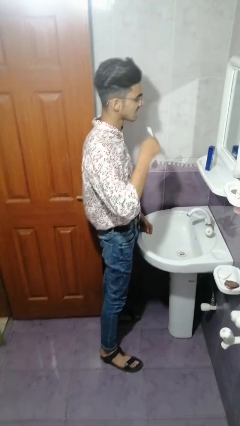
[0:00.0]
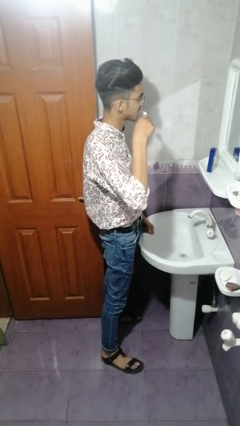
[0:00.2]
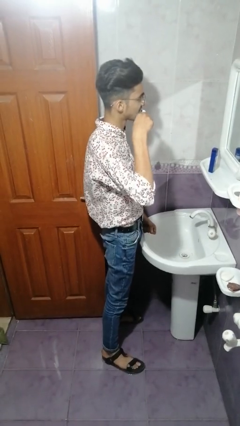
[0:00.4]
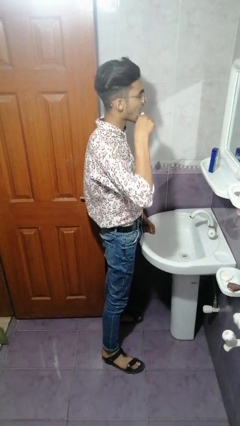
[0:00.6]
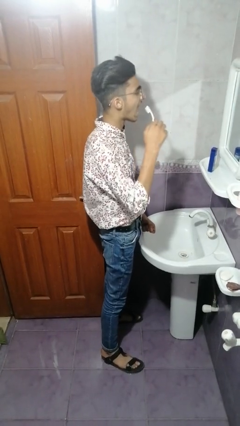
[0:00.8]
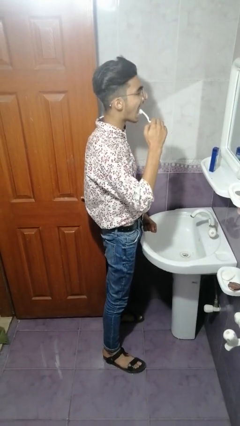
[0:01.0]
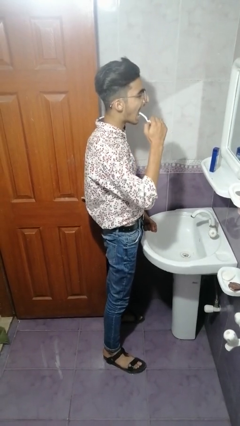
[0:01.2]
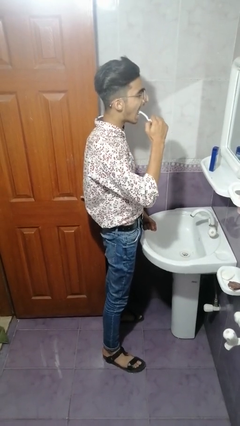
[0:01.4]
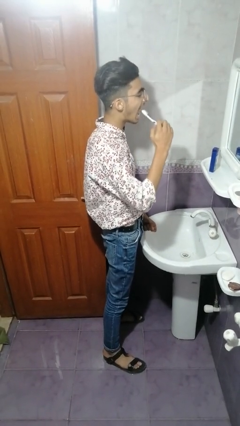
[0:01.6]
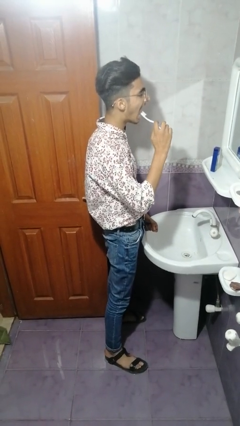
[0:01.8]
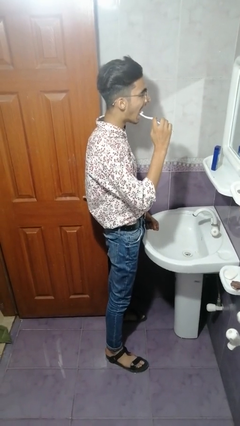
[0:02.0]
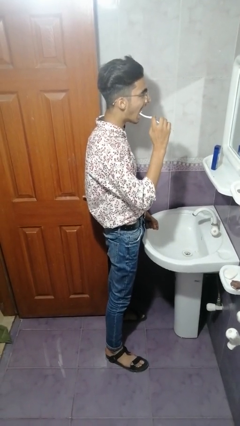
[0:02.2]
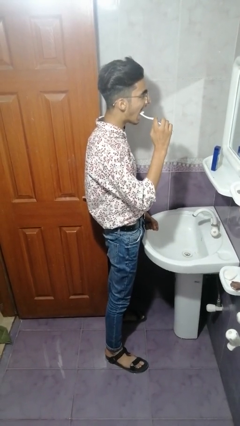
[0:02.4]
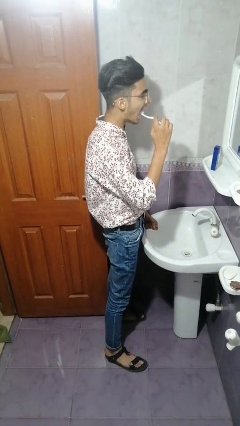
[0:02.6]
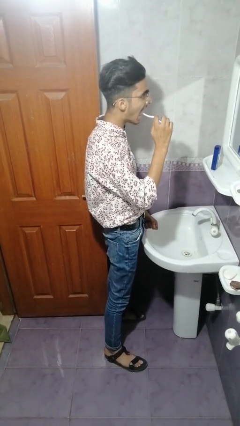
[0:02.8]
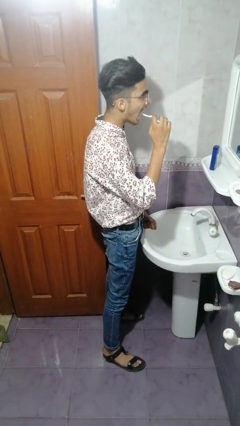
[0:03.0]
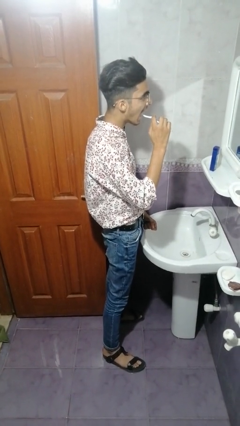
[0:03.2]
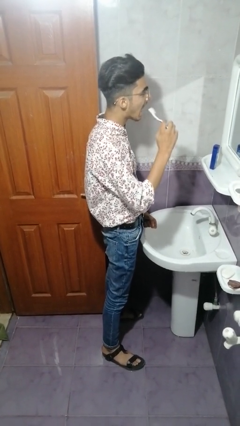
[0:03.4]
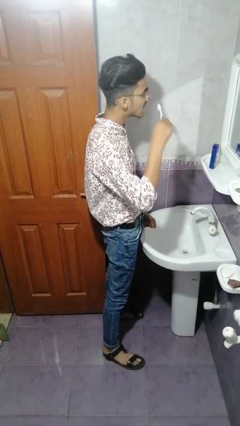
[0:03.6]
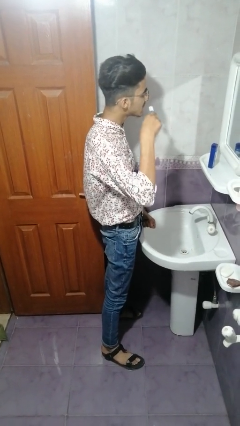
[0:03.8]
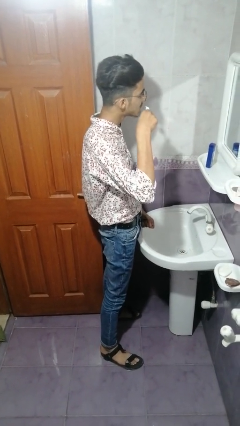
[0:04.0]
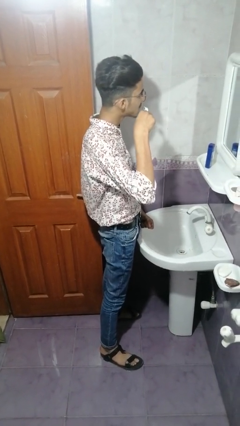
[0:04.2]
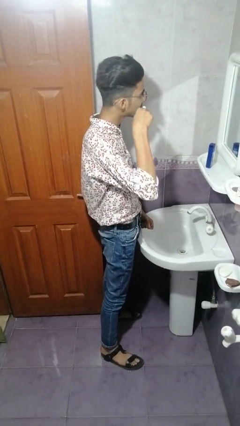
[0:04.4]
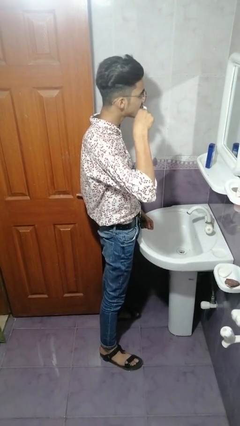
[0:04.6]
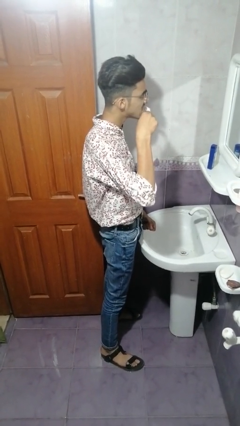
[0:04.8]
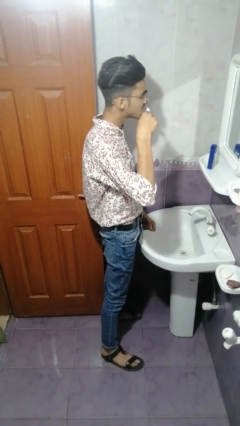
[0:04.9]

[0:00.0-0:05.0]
person brushes teeth

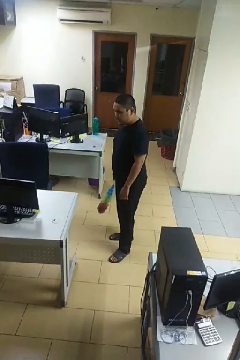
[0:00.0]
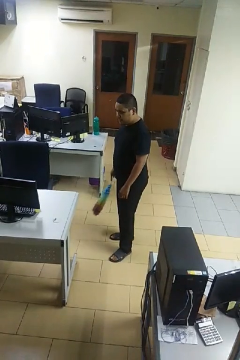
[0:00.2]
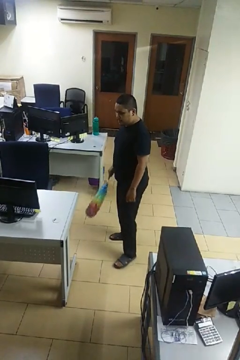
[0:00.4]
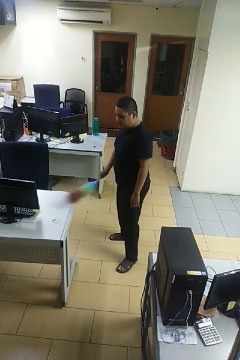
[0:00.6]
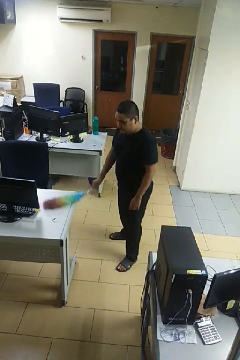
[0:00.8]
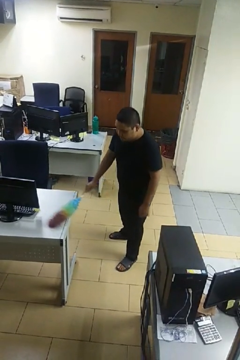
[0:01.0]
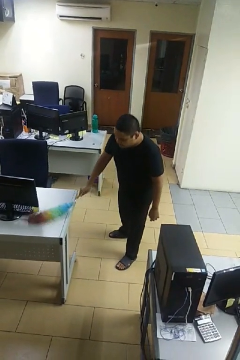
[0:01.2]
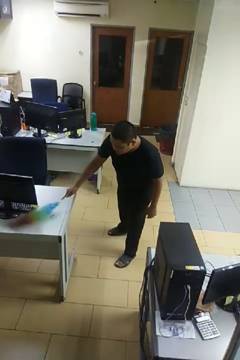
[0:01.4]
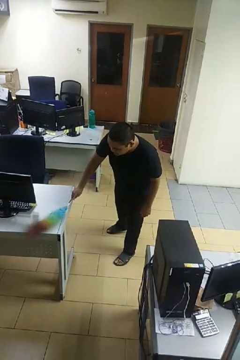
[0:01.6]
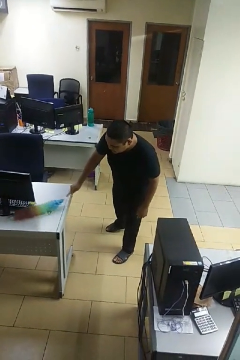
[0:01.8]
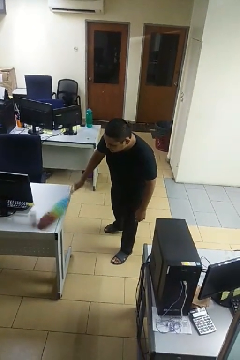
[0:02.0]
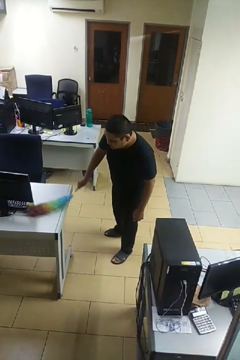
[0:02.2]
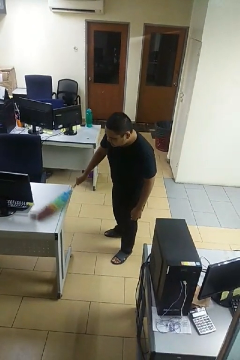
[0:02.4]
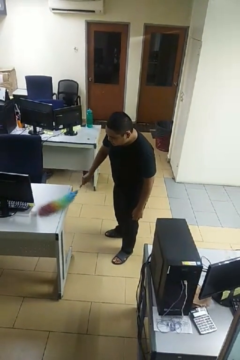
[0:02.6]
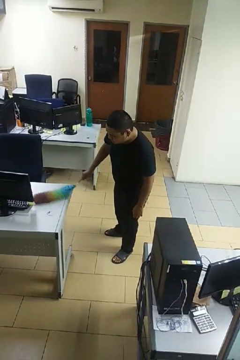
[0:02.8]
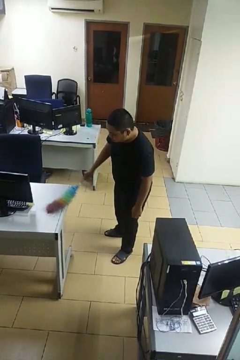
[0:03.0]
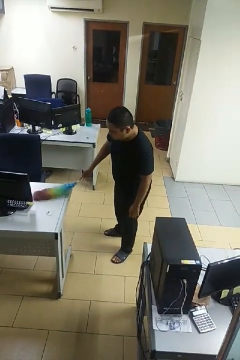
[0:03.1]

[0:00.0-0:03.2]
person dusts furniture

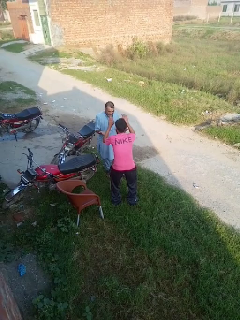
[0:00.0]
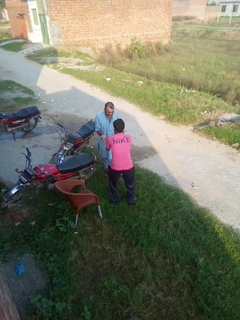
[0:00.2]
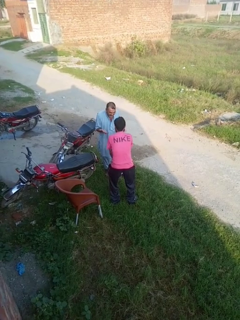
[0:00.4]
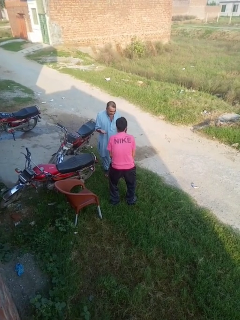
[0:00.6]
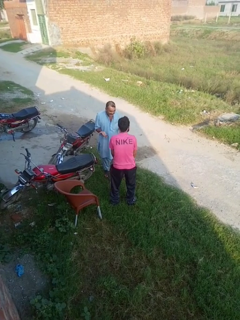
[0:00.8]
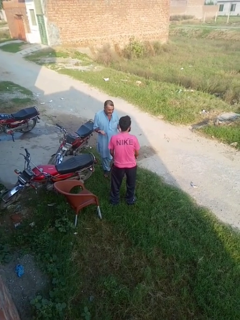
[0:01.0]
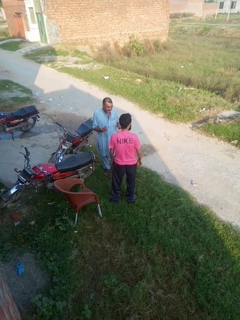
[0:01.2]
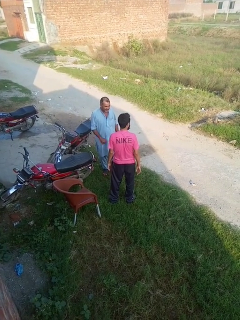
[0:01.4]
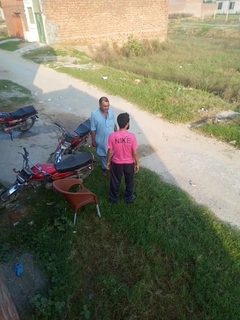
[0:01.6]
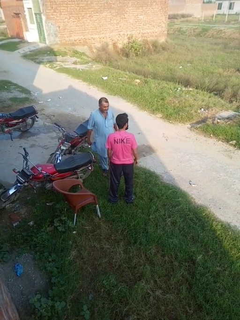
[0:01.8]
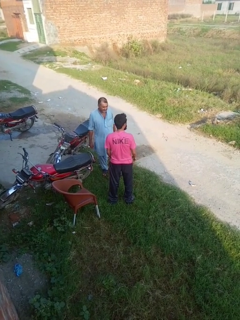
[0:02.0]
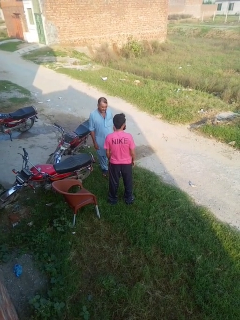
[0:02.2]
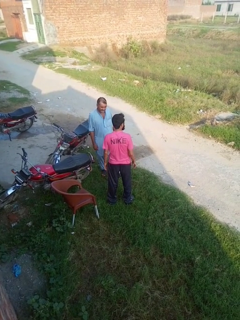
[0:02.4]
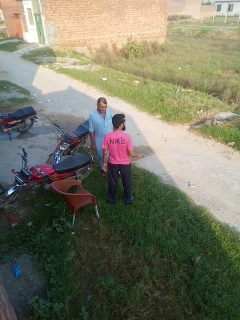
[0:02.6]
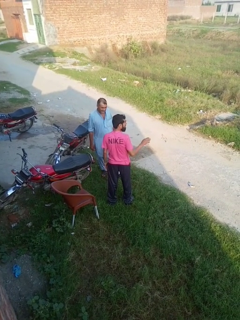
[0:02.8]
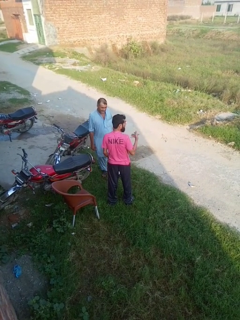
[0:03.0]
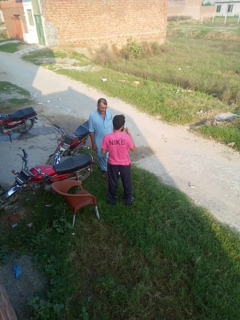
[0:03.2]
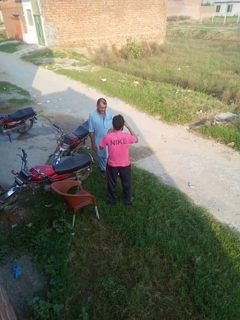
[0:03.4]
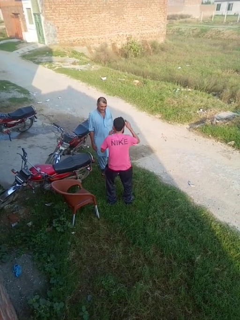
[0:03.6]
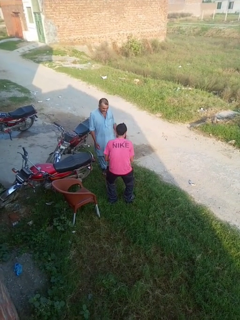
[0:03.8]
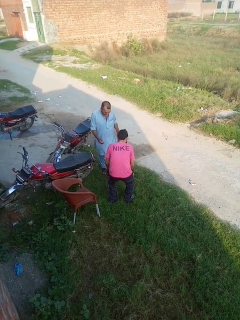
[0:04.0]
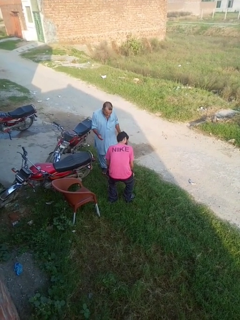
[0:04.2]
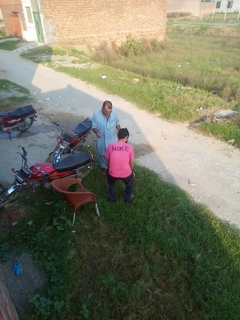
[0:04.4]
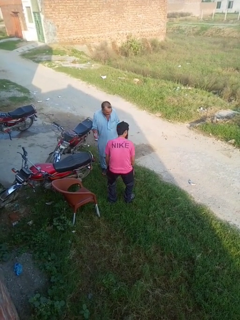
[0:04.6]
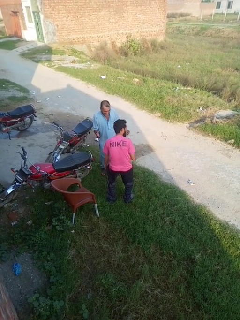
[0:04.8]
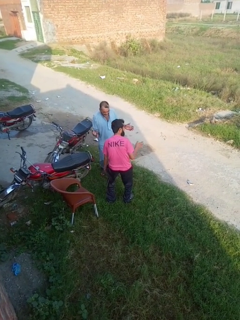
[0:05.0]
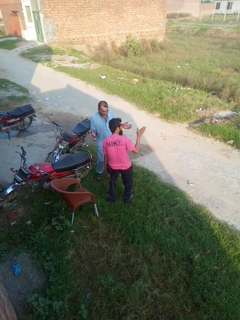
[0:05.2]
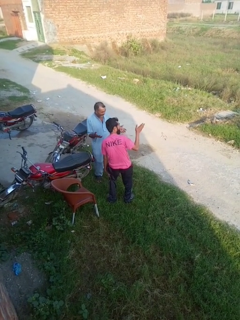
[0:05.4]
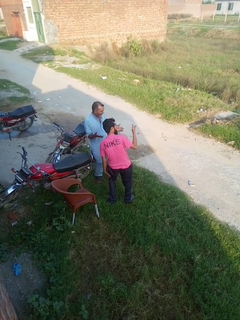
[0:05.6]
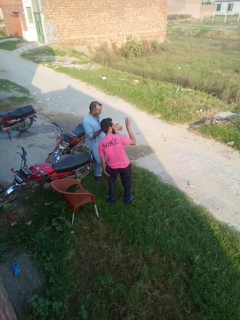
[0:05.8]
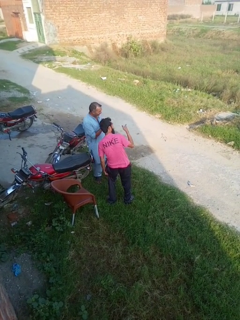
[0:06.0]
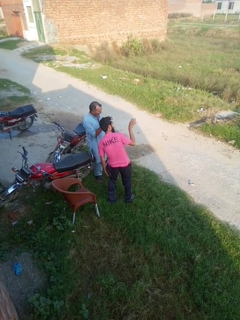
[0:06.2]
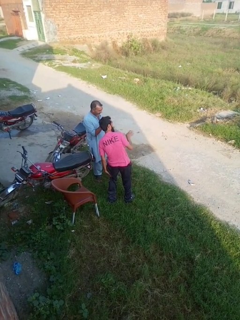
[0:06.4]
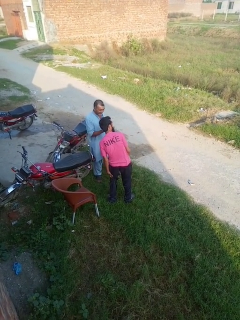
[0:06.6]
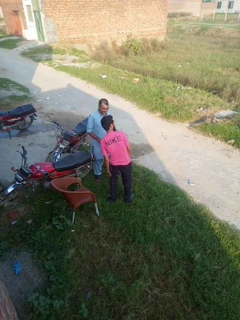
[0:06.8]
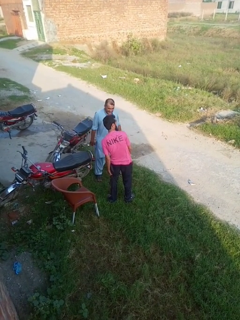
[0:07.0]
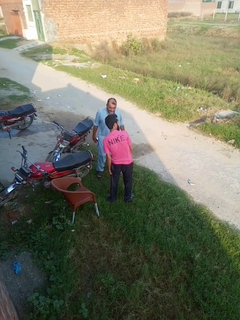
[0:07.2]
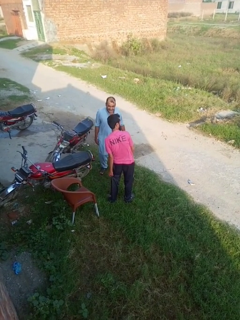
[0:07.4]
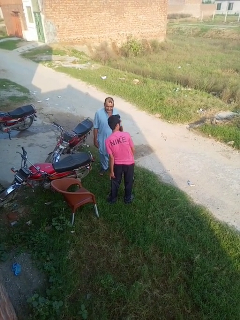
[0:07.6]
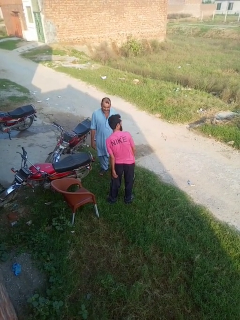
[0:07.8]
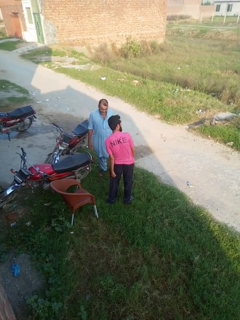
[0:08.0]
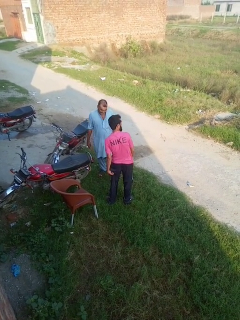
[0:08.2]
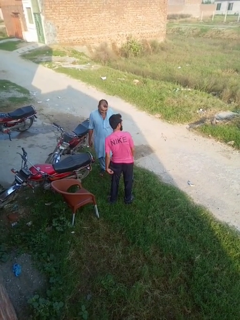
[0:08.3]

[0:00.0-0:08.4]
person laughs with person

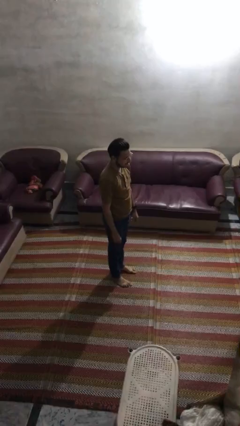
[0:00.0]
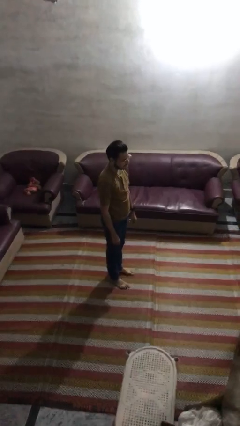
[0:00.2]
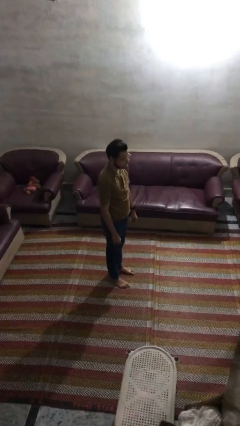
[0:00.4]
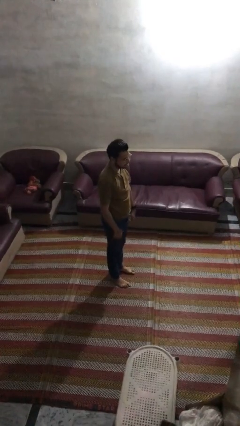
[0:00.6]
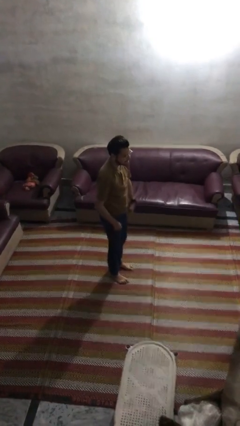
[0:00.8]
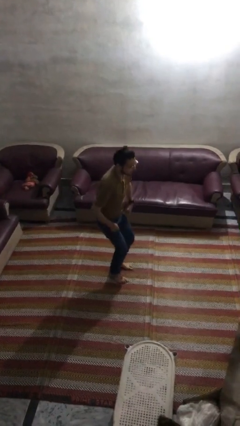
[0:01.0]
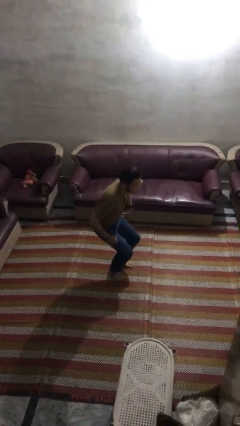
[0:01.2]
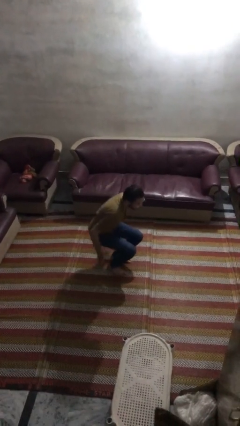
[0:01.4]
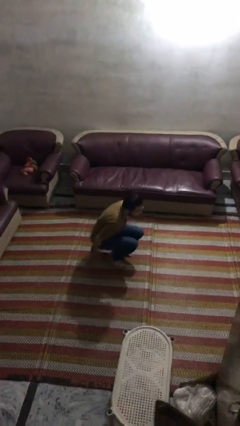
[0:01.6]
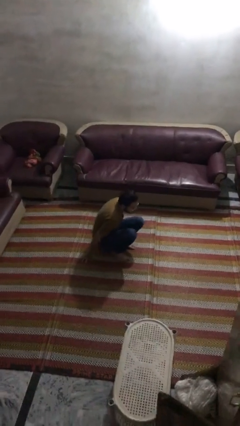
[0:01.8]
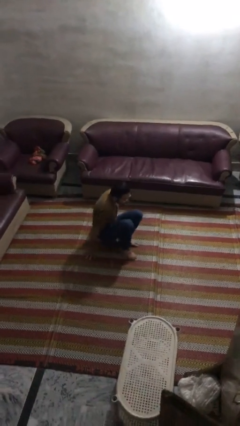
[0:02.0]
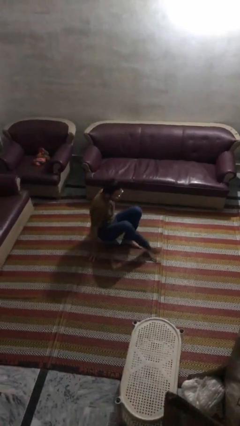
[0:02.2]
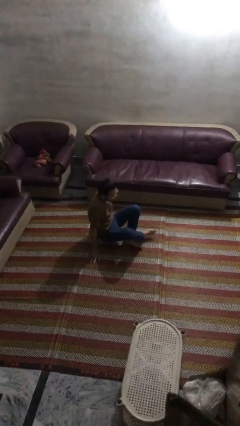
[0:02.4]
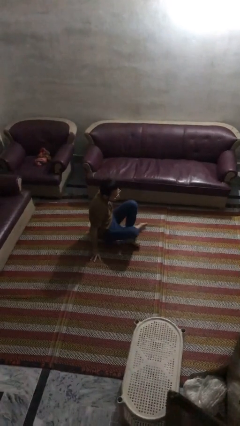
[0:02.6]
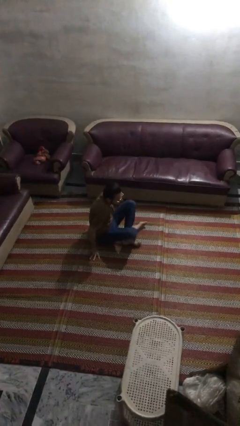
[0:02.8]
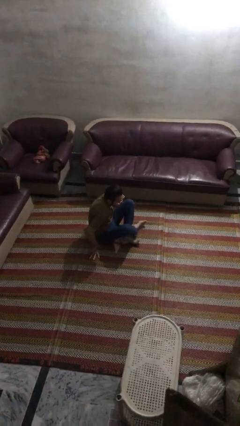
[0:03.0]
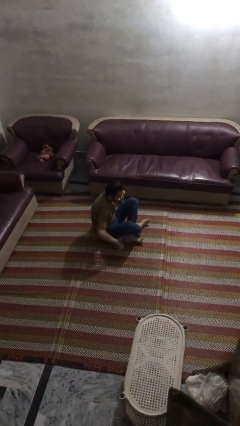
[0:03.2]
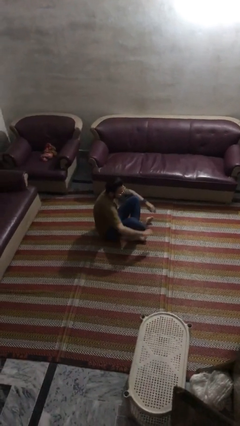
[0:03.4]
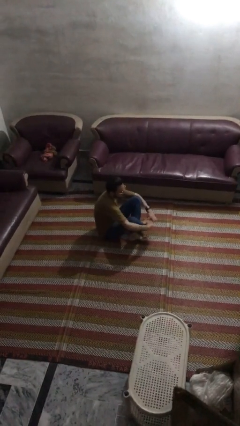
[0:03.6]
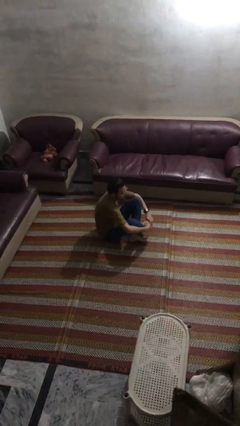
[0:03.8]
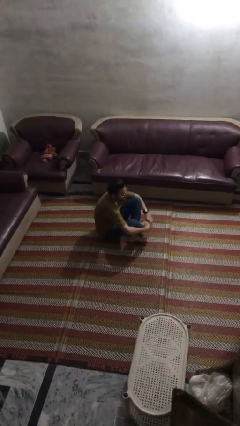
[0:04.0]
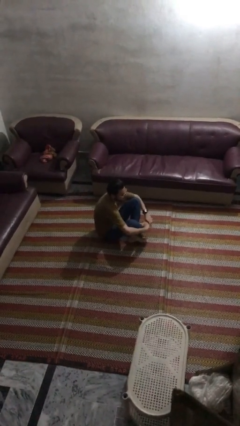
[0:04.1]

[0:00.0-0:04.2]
person sits crisscross
